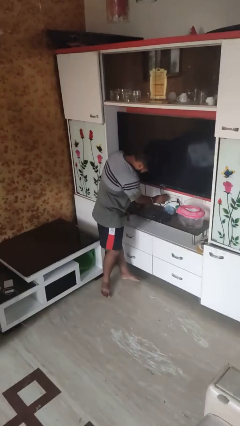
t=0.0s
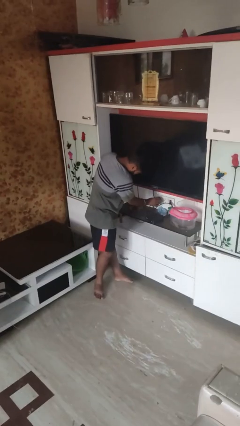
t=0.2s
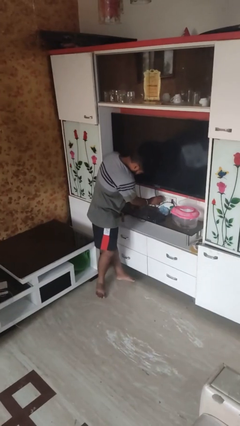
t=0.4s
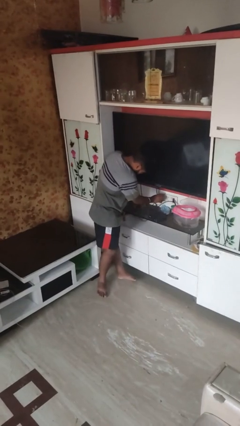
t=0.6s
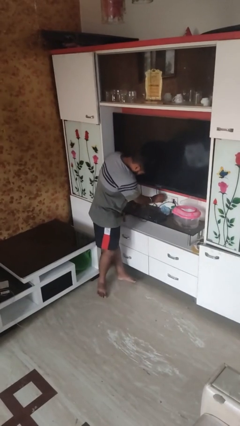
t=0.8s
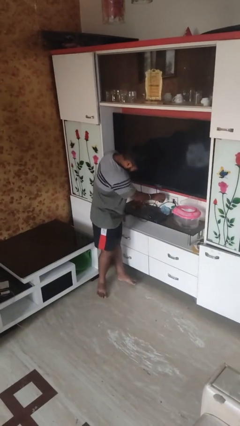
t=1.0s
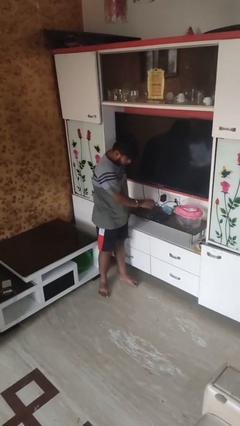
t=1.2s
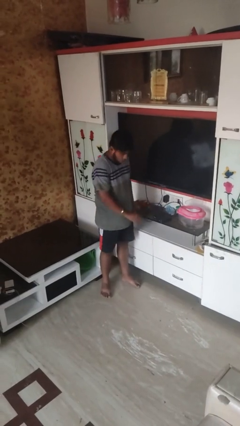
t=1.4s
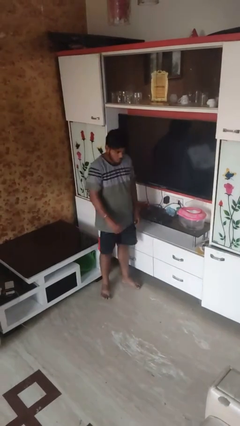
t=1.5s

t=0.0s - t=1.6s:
person plugs into electrical socket

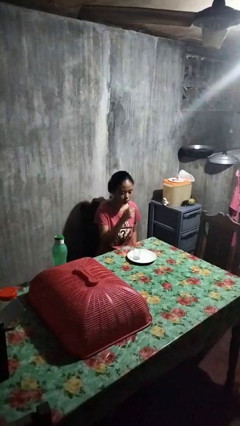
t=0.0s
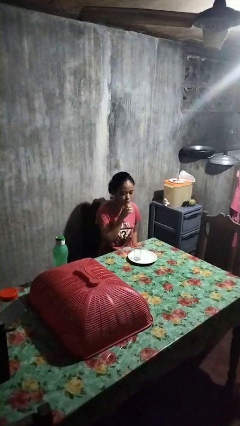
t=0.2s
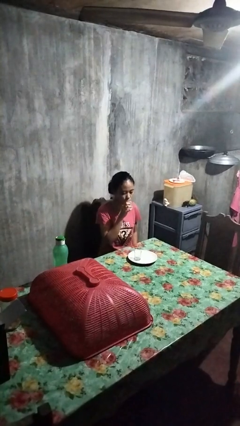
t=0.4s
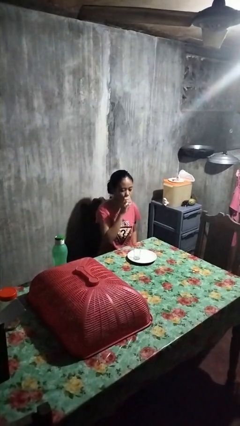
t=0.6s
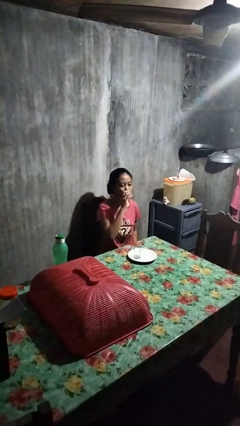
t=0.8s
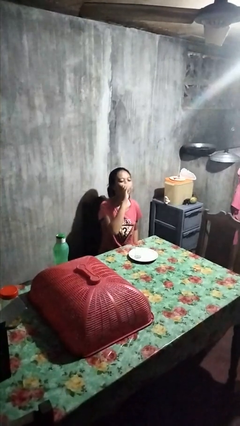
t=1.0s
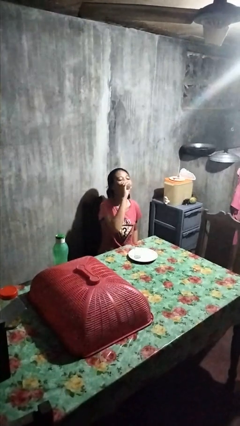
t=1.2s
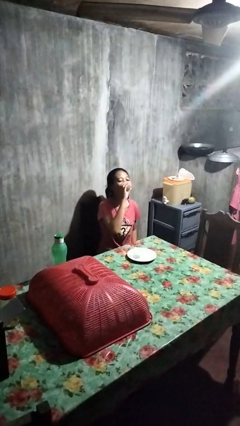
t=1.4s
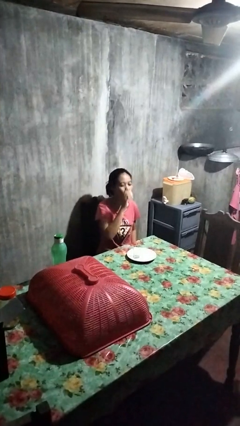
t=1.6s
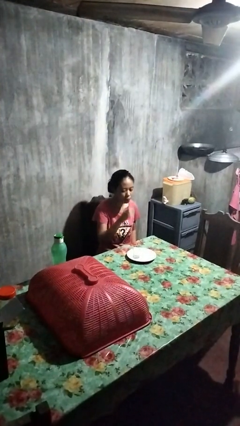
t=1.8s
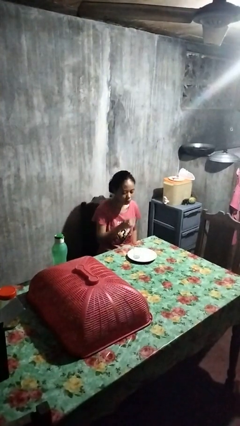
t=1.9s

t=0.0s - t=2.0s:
person drinks from shotglass

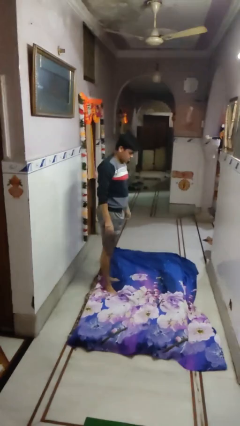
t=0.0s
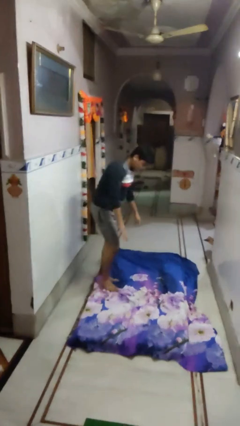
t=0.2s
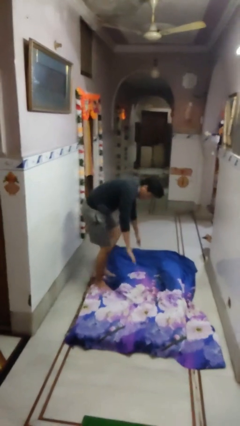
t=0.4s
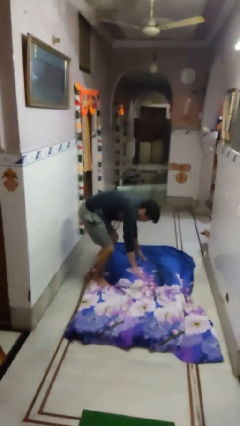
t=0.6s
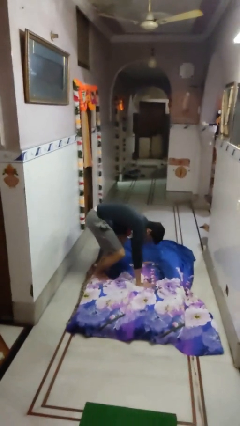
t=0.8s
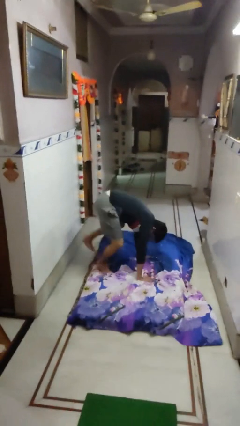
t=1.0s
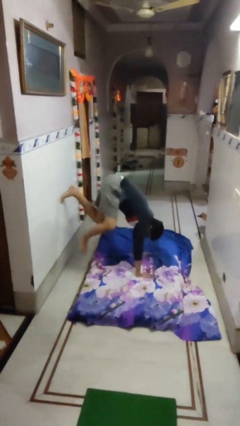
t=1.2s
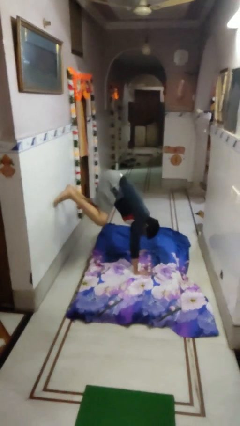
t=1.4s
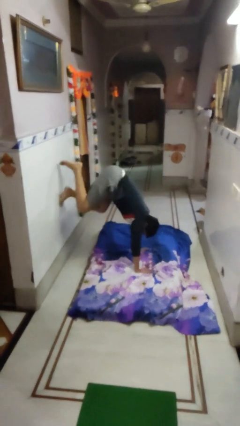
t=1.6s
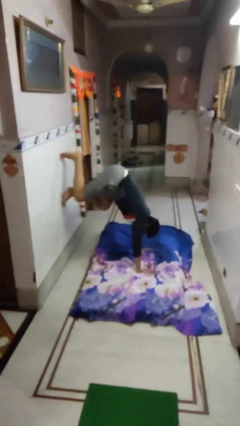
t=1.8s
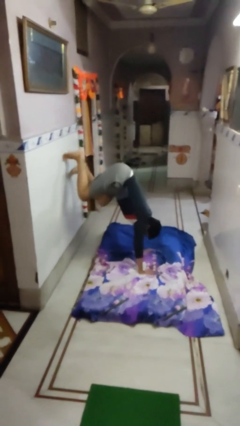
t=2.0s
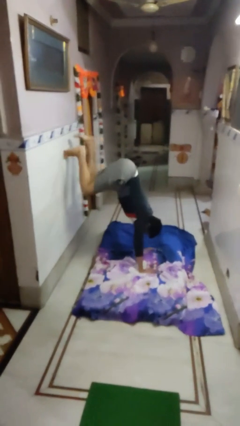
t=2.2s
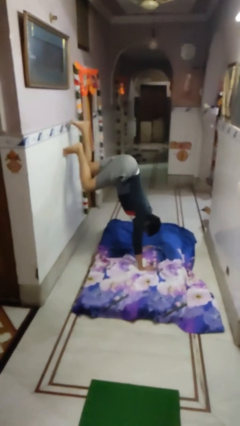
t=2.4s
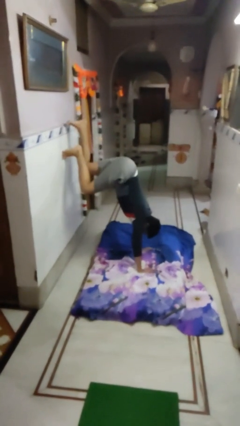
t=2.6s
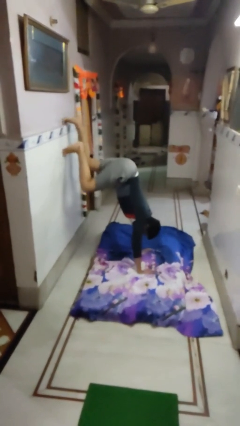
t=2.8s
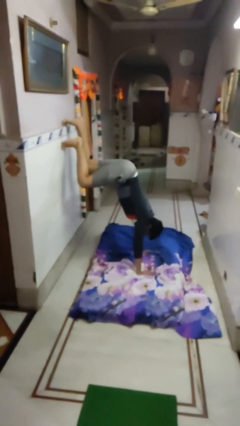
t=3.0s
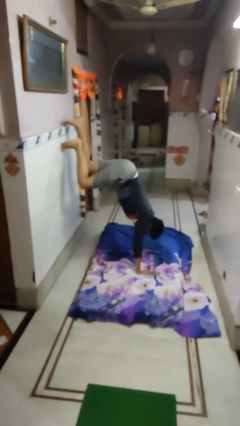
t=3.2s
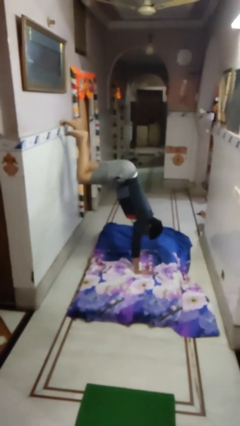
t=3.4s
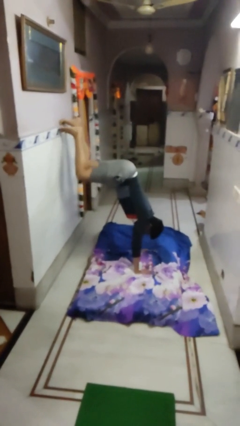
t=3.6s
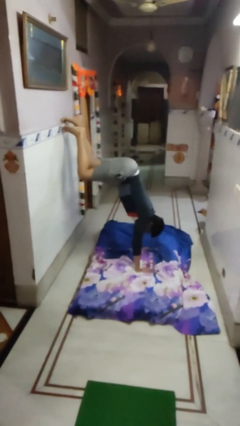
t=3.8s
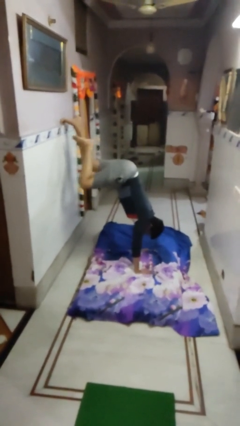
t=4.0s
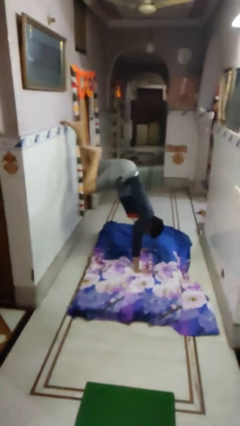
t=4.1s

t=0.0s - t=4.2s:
person handstand

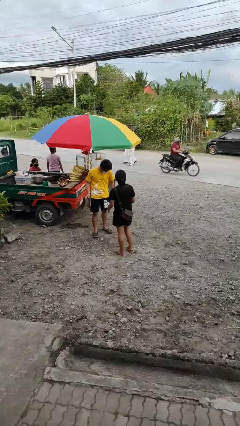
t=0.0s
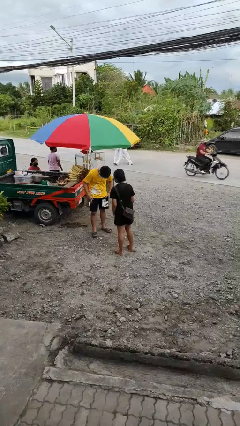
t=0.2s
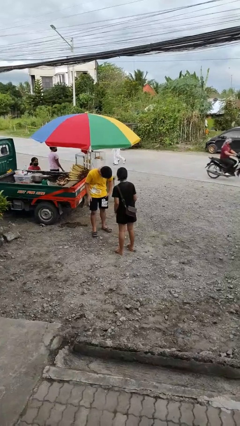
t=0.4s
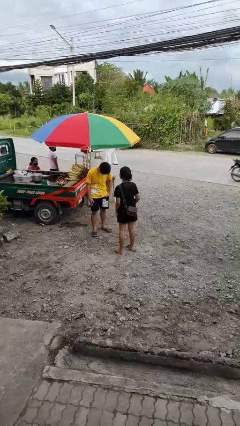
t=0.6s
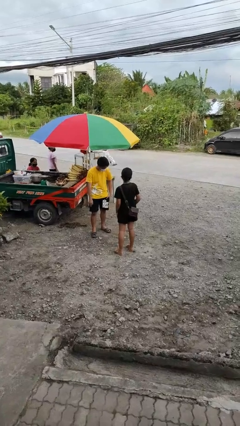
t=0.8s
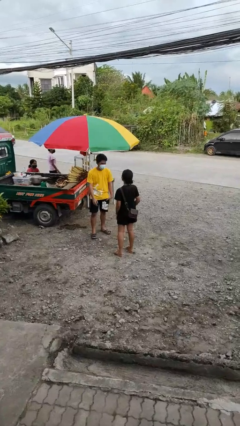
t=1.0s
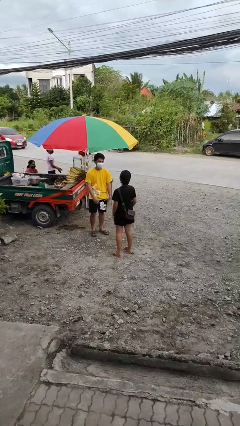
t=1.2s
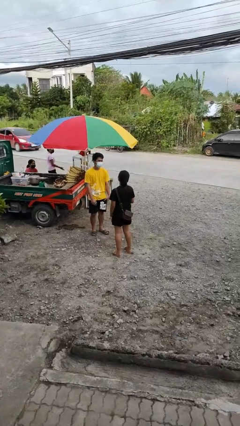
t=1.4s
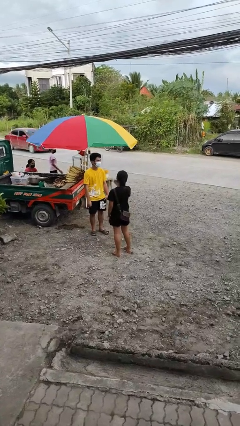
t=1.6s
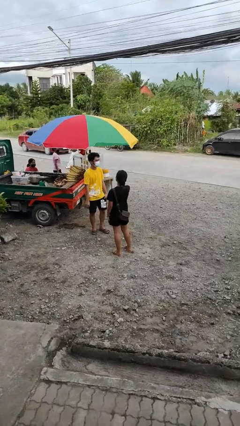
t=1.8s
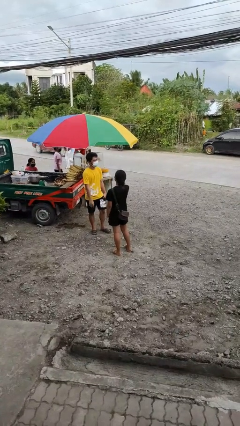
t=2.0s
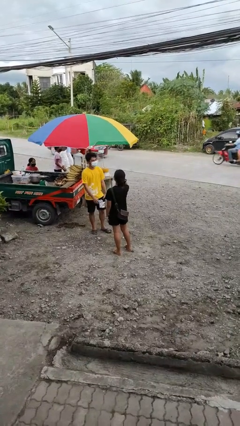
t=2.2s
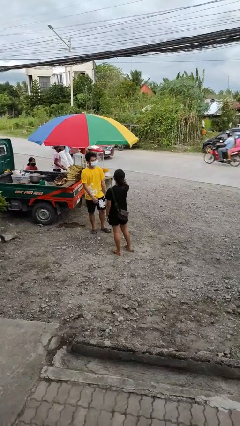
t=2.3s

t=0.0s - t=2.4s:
person laughs with person

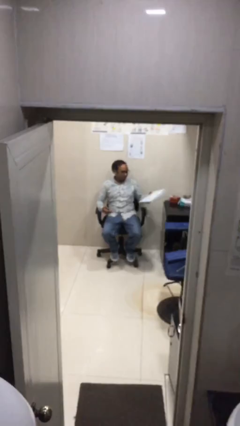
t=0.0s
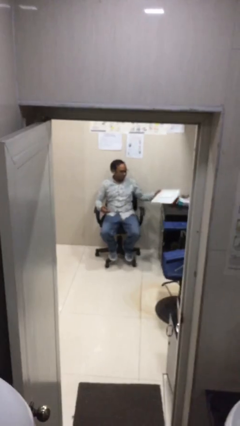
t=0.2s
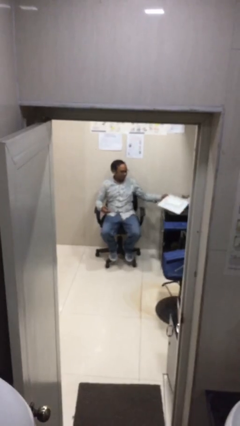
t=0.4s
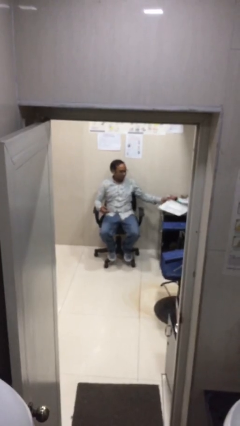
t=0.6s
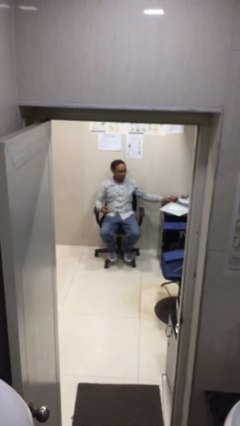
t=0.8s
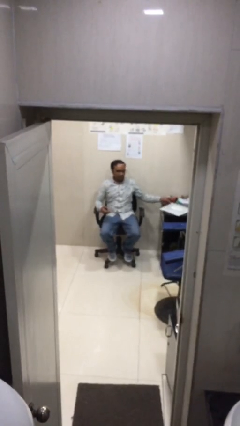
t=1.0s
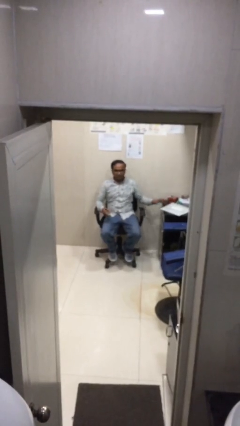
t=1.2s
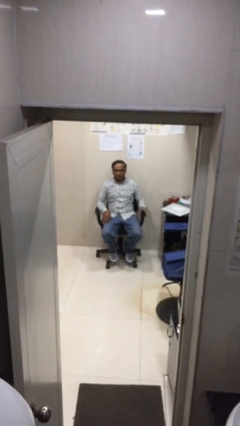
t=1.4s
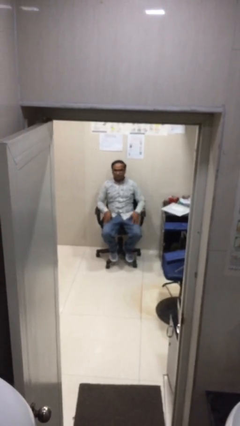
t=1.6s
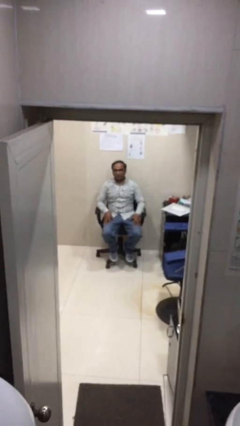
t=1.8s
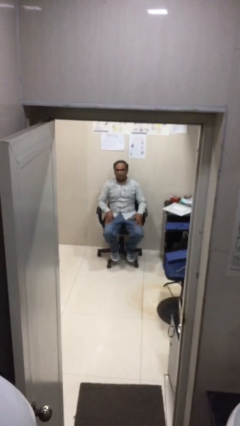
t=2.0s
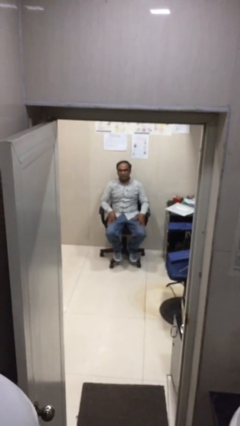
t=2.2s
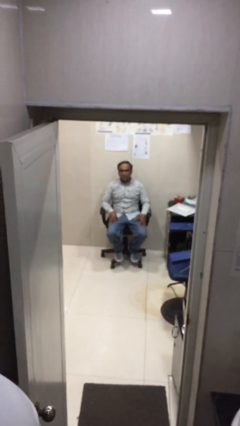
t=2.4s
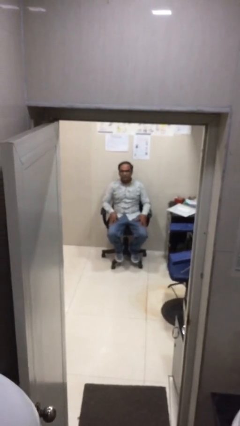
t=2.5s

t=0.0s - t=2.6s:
person puts down object on table

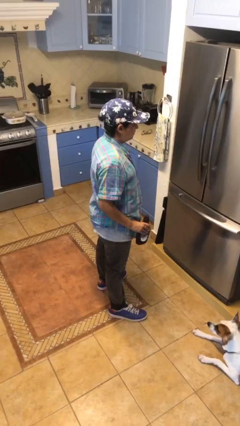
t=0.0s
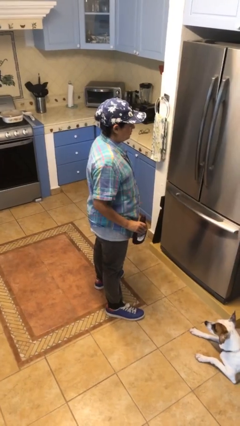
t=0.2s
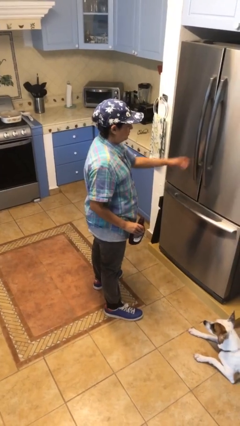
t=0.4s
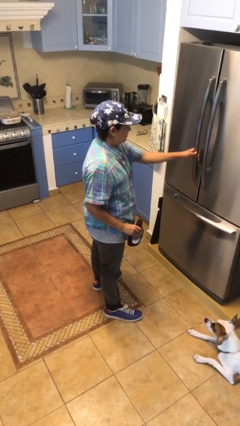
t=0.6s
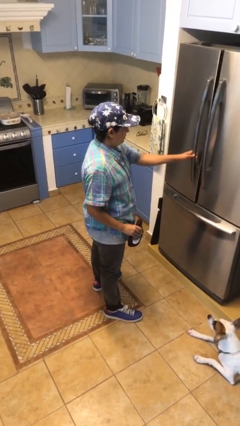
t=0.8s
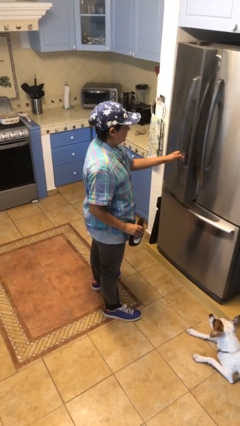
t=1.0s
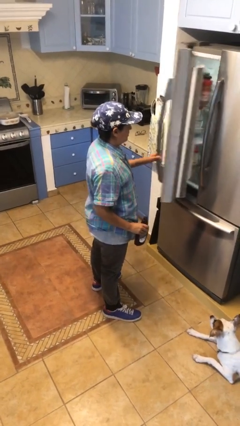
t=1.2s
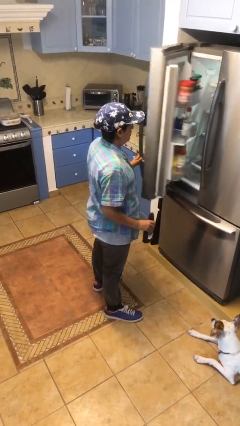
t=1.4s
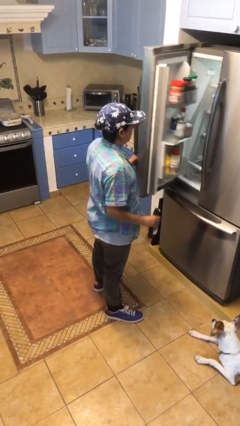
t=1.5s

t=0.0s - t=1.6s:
person opens refrigerator

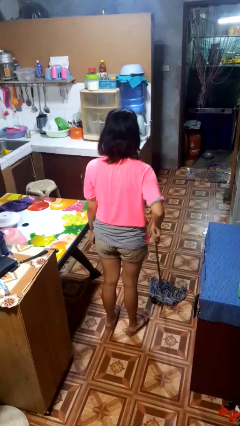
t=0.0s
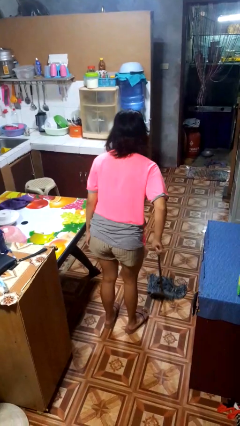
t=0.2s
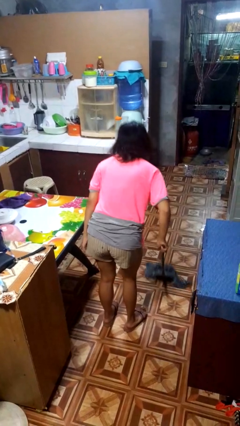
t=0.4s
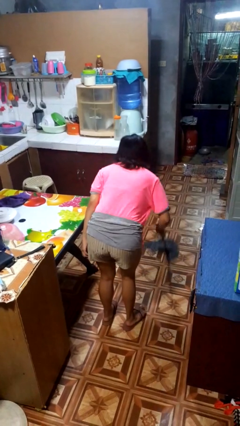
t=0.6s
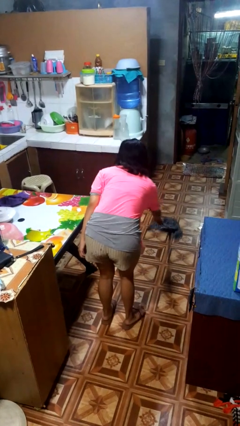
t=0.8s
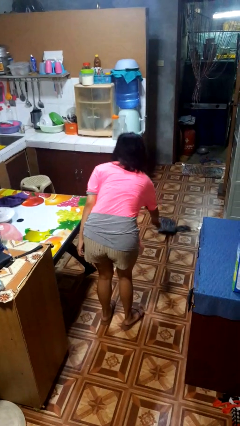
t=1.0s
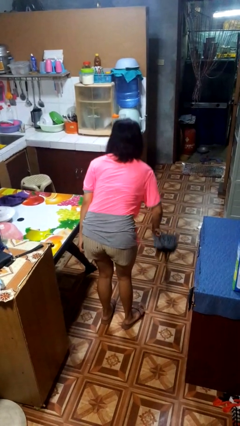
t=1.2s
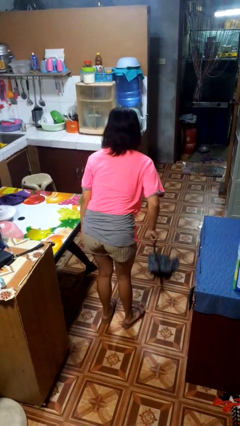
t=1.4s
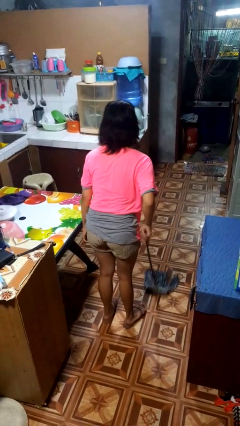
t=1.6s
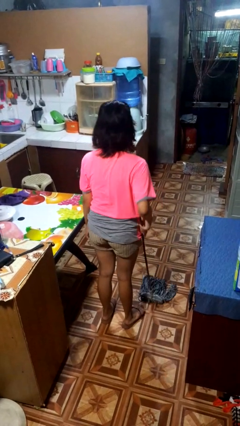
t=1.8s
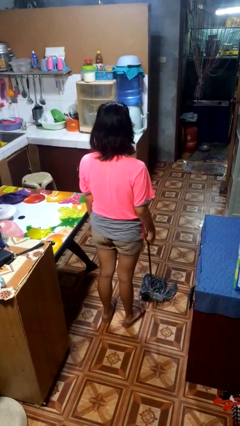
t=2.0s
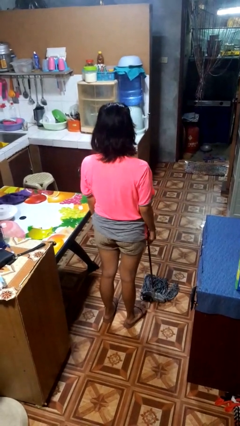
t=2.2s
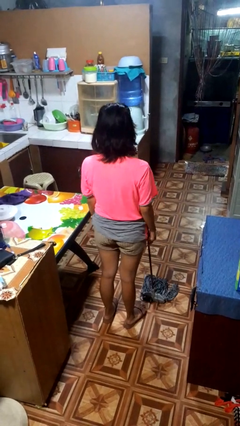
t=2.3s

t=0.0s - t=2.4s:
person mops

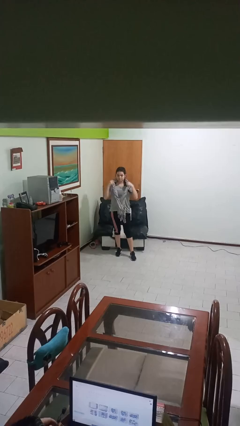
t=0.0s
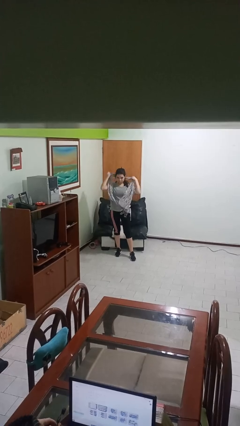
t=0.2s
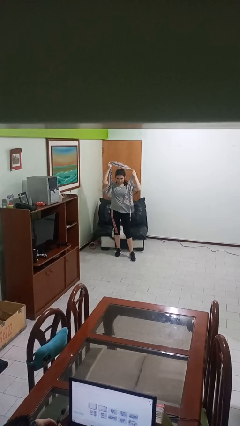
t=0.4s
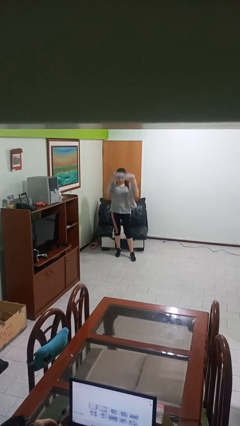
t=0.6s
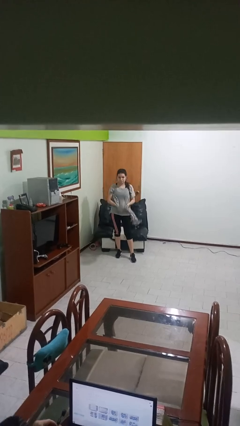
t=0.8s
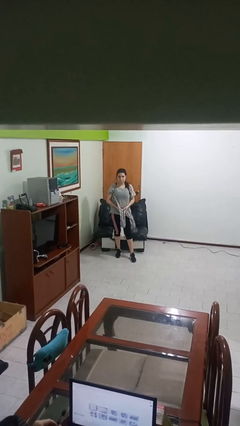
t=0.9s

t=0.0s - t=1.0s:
person takes off scarf
